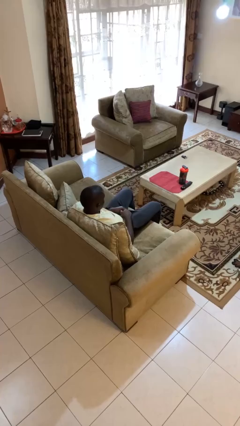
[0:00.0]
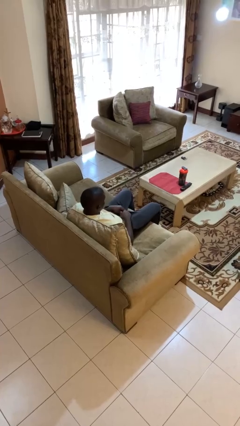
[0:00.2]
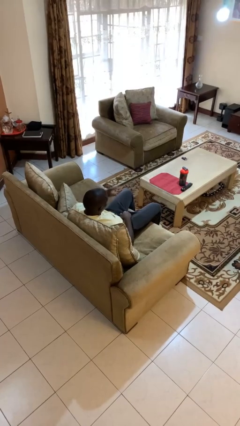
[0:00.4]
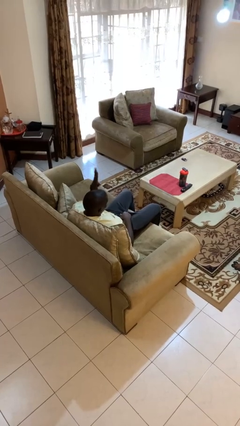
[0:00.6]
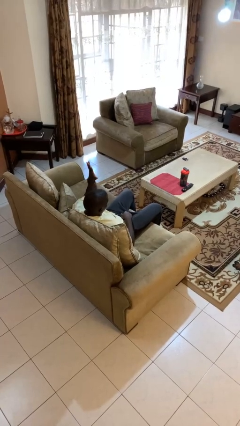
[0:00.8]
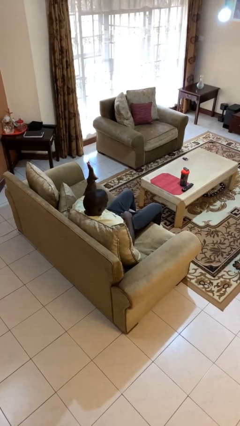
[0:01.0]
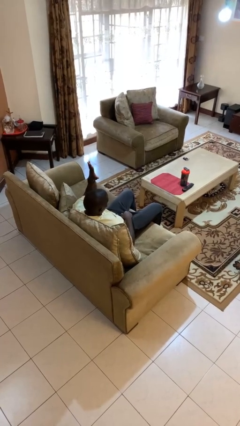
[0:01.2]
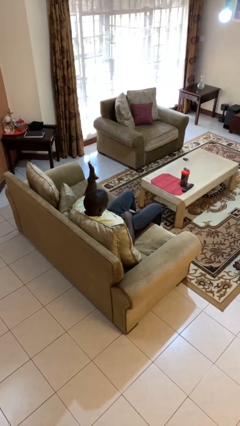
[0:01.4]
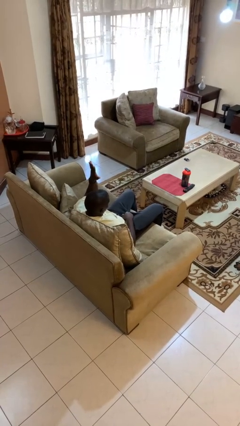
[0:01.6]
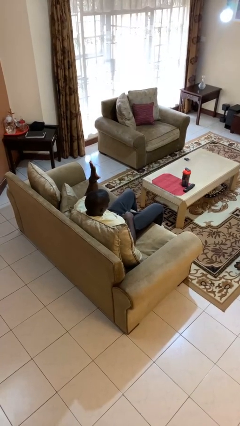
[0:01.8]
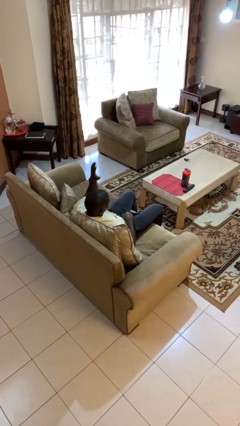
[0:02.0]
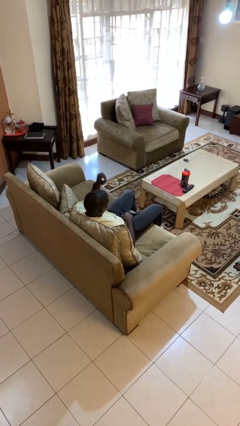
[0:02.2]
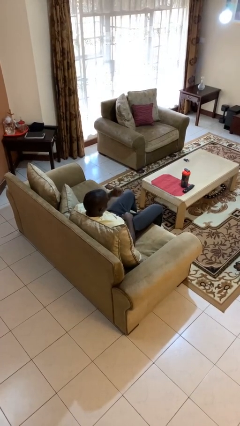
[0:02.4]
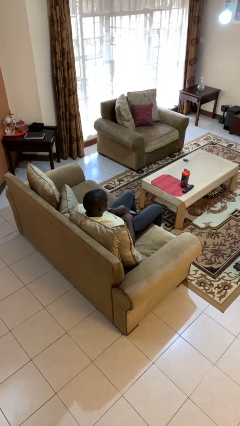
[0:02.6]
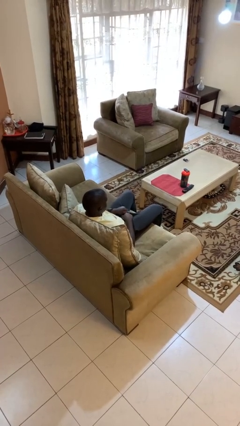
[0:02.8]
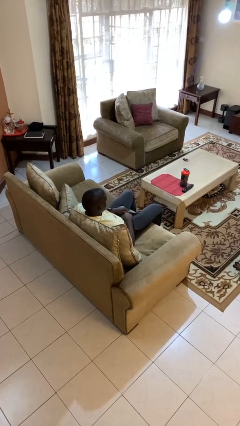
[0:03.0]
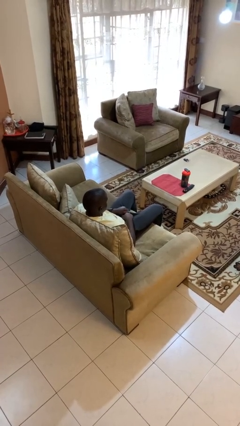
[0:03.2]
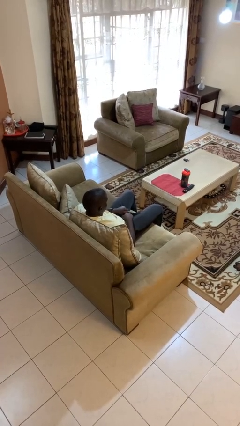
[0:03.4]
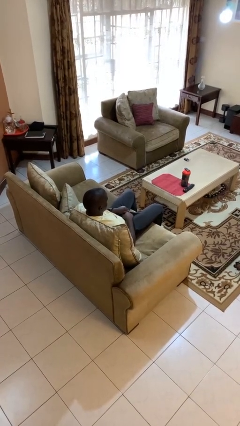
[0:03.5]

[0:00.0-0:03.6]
person gestures number five

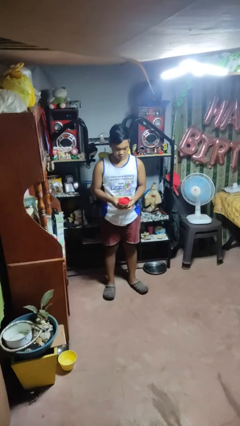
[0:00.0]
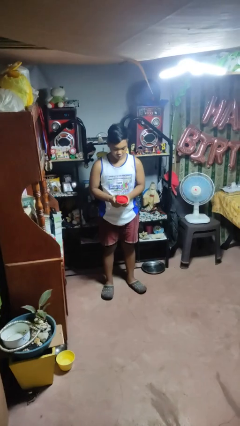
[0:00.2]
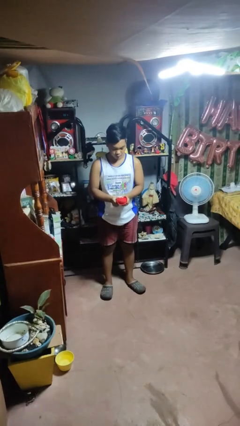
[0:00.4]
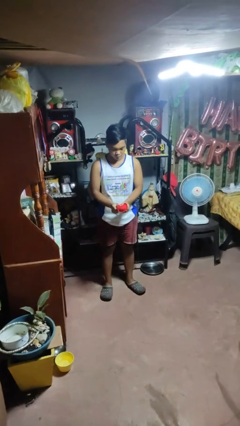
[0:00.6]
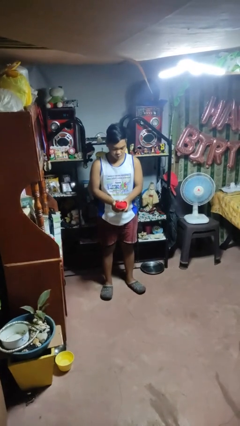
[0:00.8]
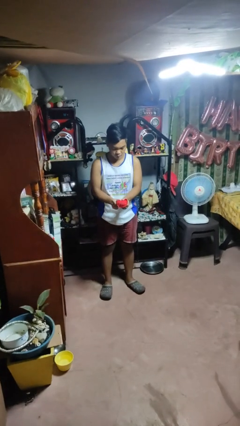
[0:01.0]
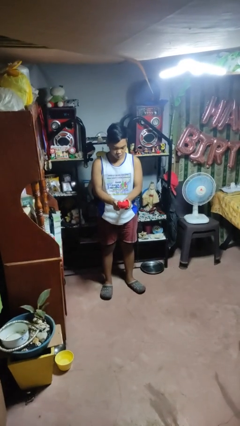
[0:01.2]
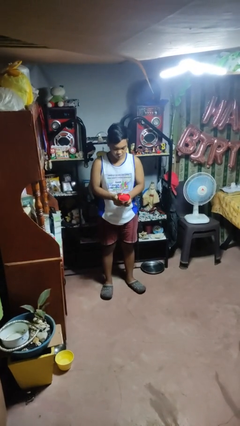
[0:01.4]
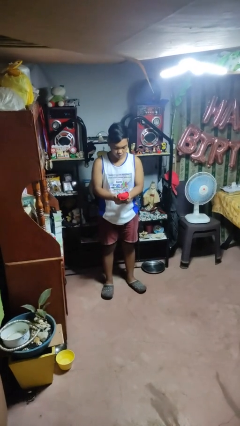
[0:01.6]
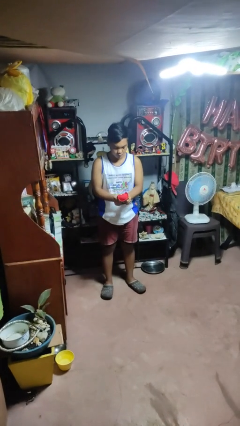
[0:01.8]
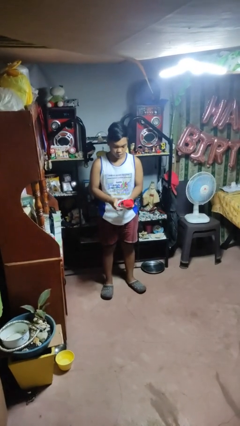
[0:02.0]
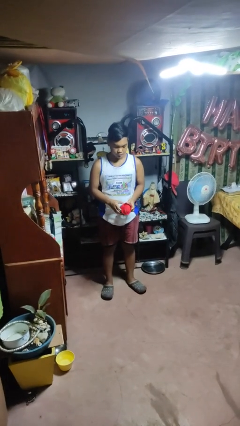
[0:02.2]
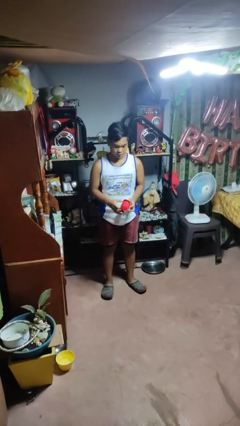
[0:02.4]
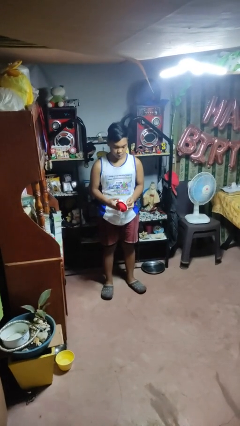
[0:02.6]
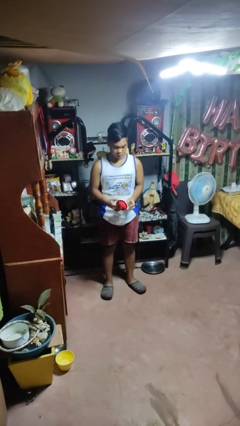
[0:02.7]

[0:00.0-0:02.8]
person squeezes object

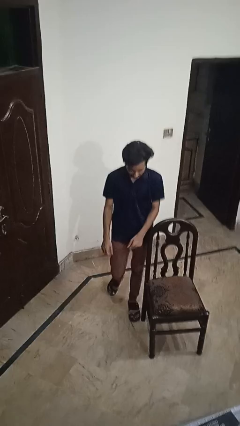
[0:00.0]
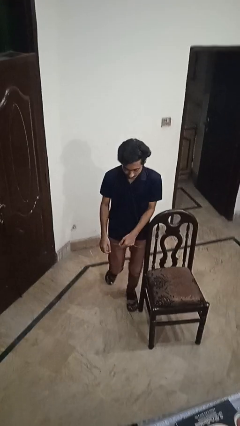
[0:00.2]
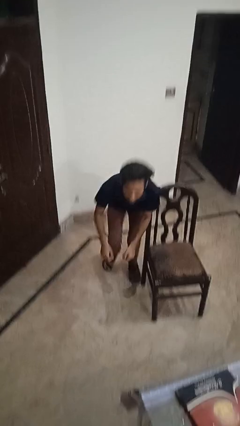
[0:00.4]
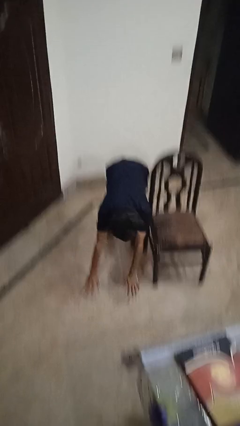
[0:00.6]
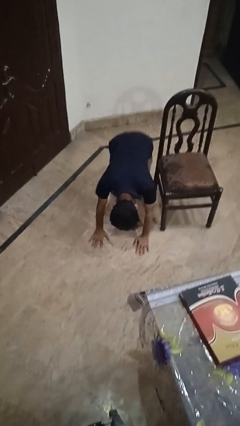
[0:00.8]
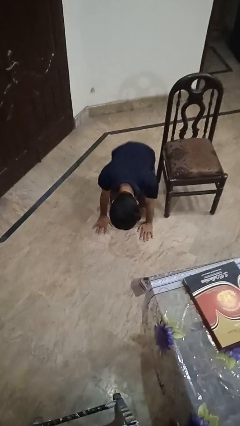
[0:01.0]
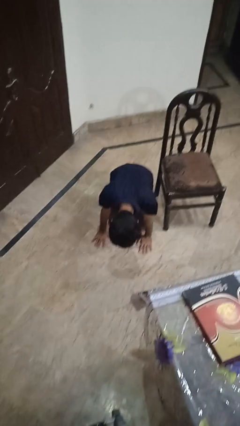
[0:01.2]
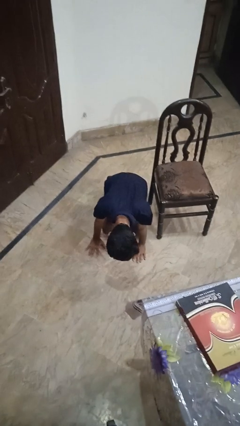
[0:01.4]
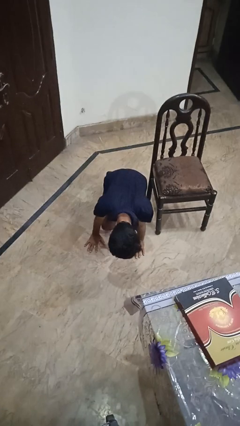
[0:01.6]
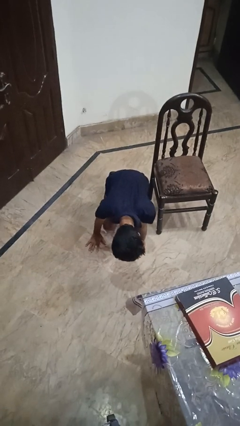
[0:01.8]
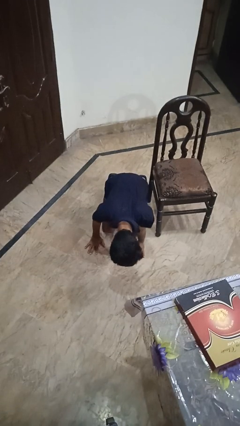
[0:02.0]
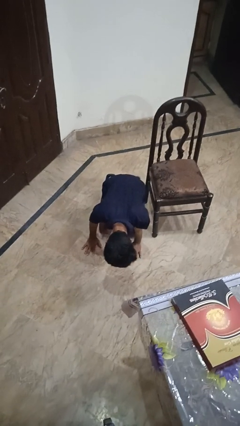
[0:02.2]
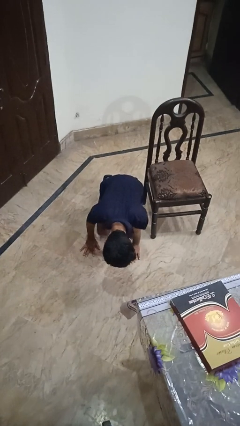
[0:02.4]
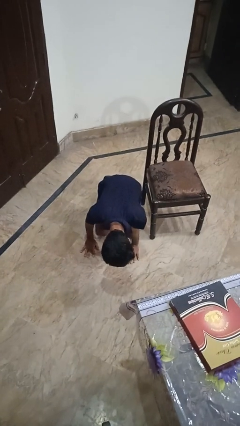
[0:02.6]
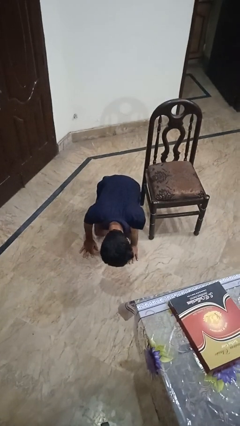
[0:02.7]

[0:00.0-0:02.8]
person trips on object on floor

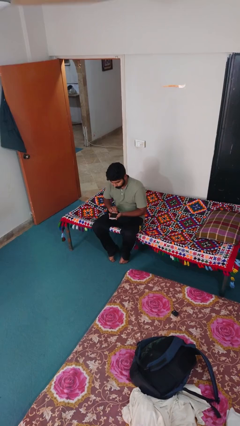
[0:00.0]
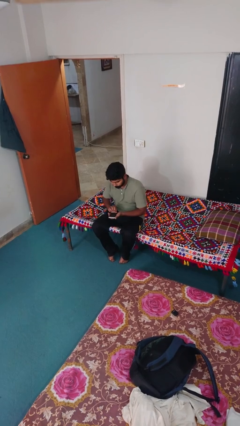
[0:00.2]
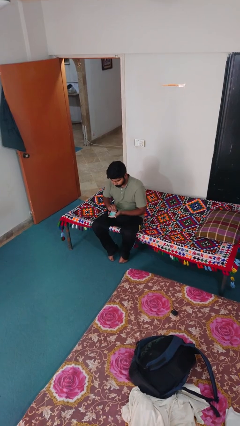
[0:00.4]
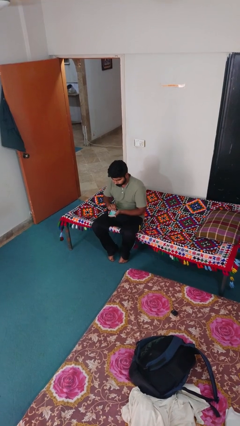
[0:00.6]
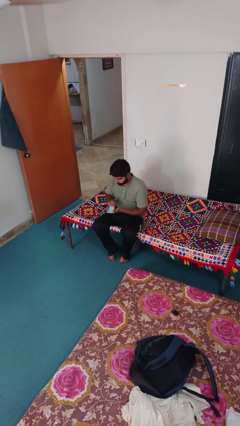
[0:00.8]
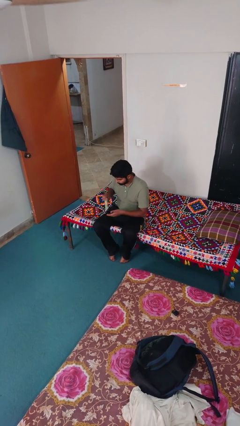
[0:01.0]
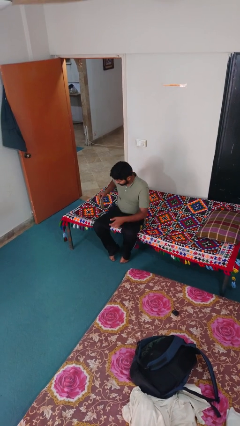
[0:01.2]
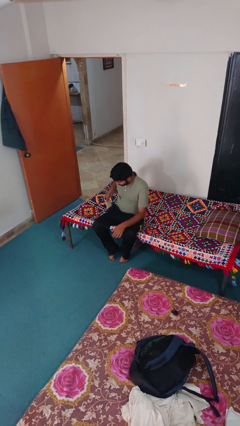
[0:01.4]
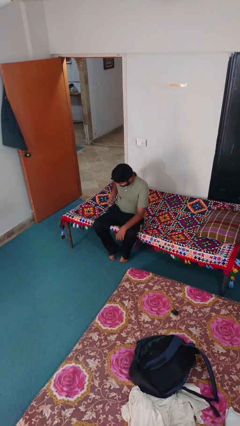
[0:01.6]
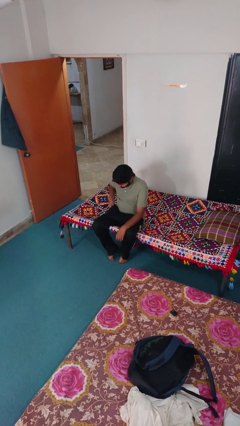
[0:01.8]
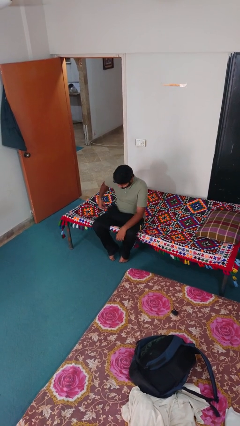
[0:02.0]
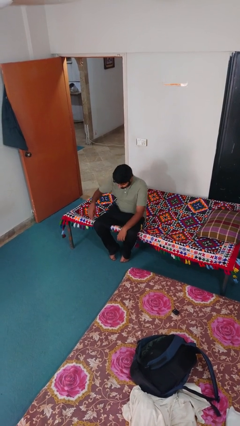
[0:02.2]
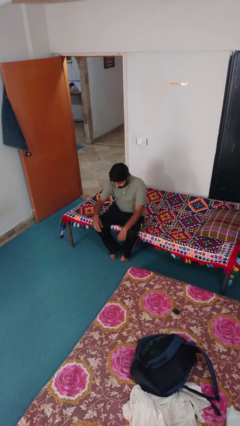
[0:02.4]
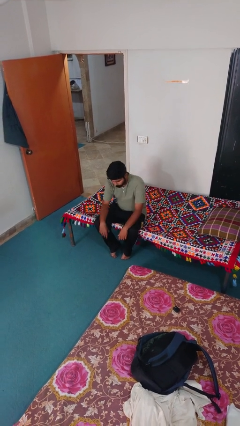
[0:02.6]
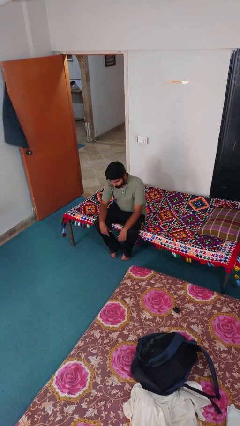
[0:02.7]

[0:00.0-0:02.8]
person puts phone into pocket

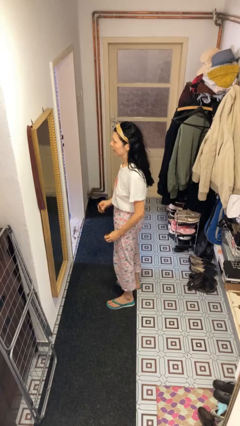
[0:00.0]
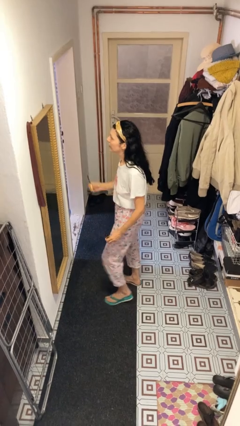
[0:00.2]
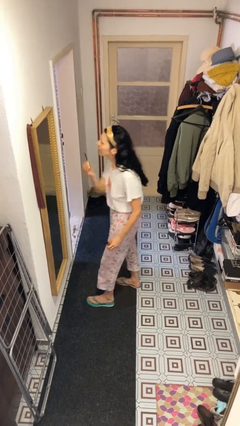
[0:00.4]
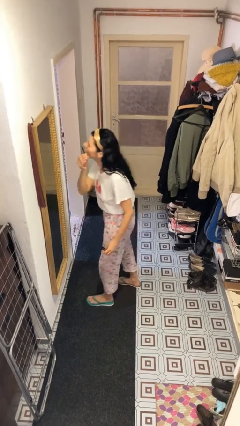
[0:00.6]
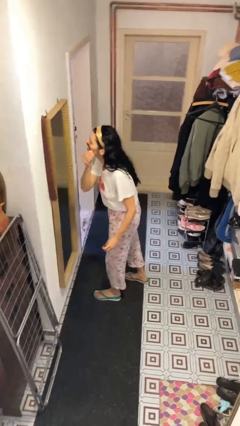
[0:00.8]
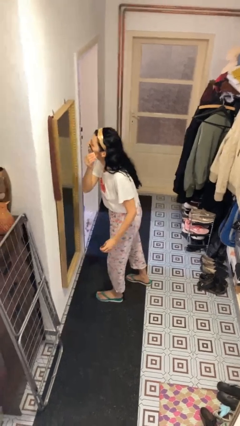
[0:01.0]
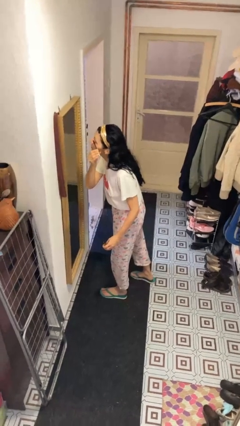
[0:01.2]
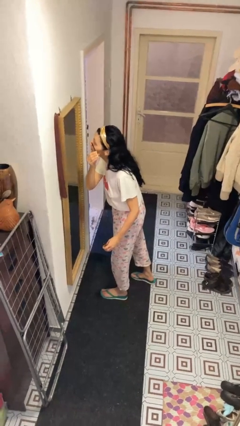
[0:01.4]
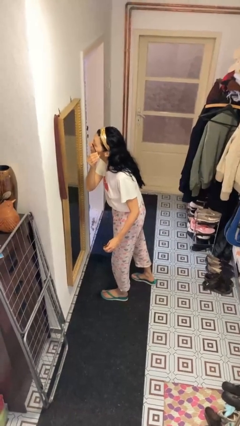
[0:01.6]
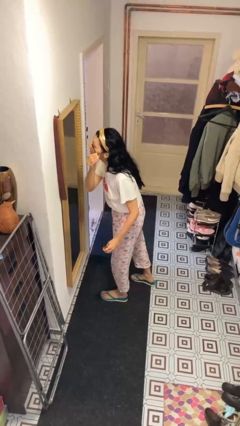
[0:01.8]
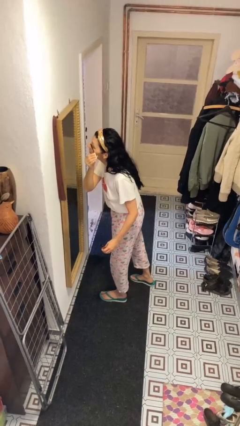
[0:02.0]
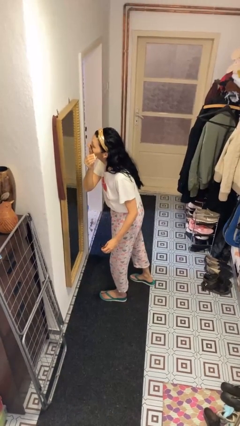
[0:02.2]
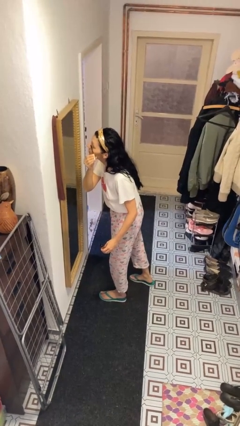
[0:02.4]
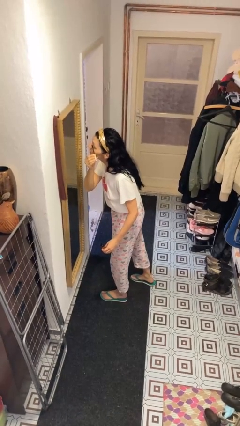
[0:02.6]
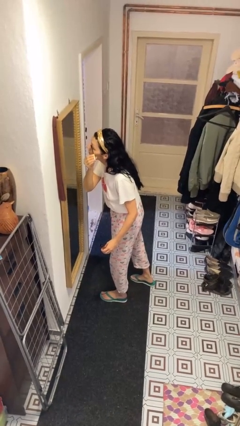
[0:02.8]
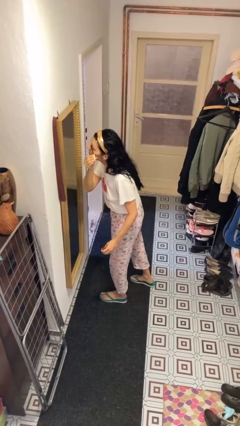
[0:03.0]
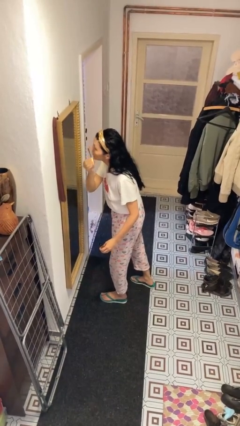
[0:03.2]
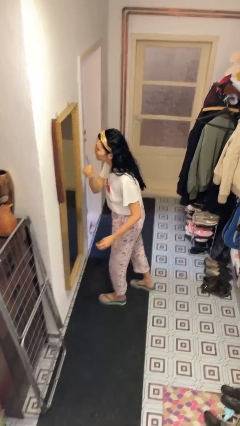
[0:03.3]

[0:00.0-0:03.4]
person applies eye makeup

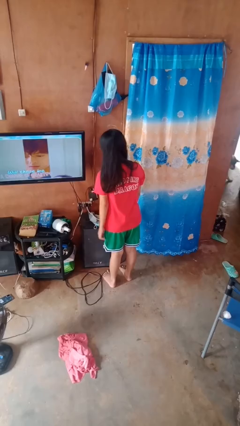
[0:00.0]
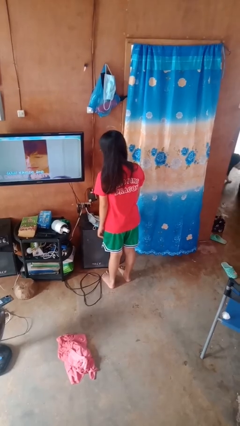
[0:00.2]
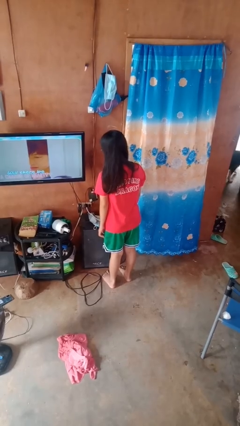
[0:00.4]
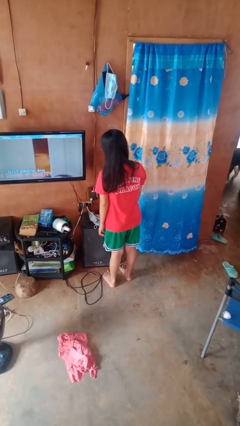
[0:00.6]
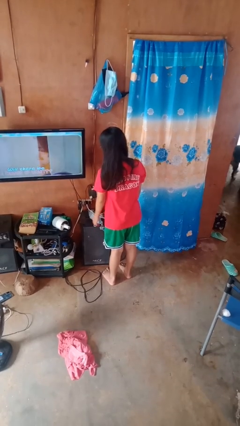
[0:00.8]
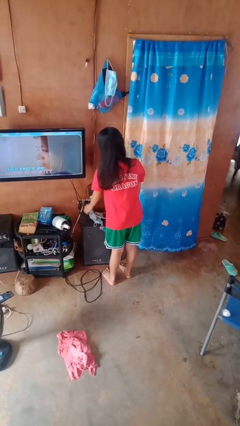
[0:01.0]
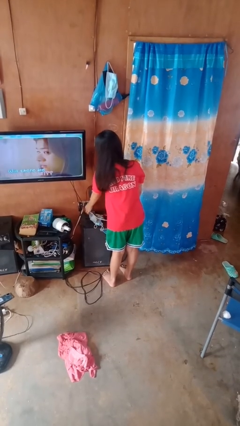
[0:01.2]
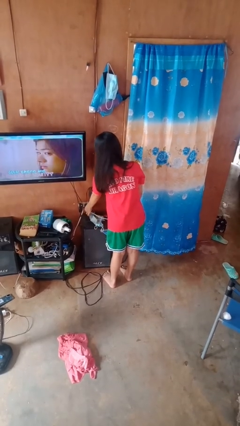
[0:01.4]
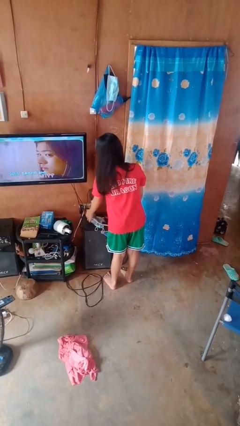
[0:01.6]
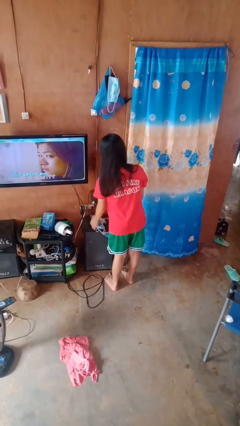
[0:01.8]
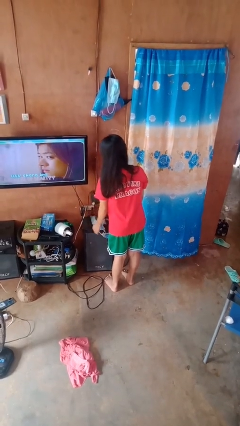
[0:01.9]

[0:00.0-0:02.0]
person unplugs from electrical socket
